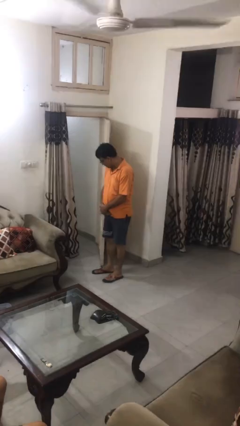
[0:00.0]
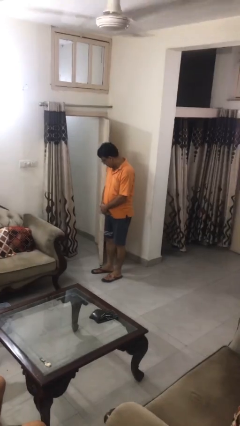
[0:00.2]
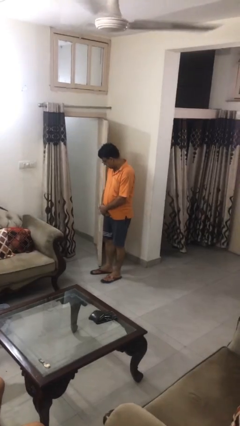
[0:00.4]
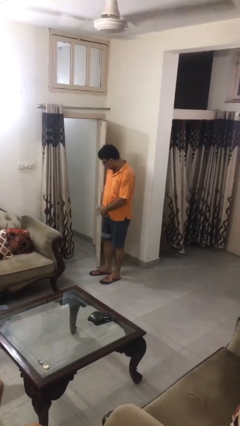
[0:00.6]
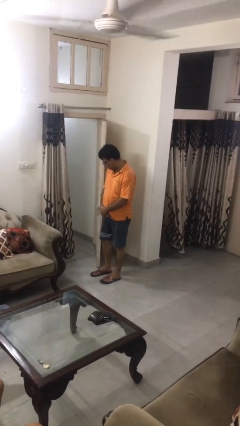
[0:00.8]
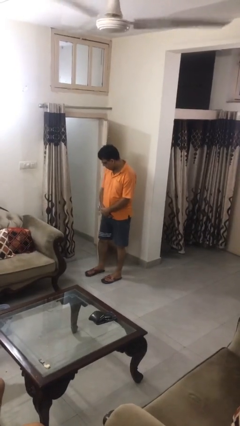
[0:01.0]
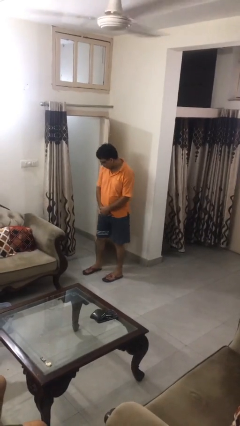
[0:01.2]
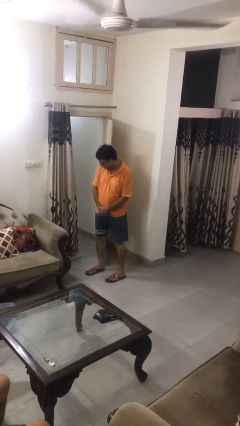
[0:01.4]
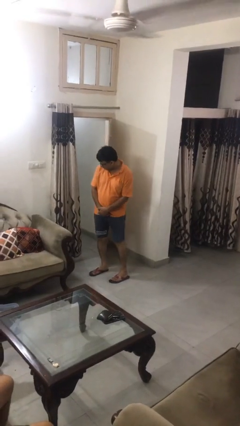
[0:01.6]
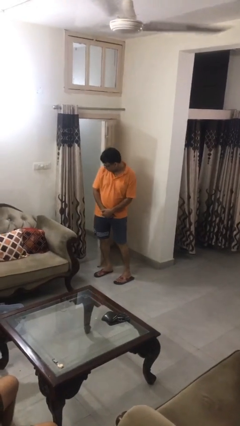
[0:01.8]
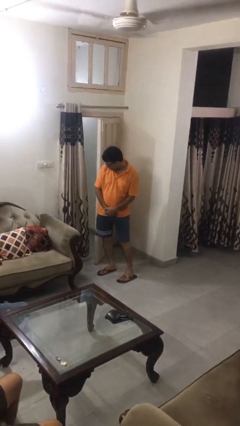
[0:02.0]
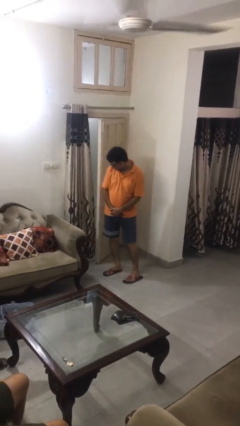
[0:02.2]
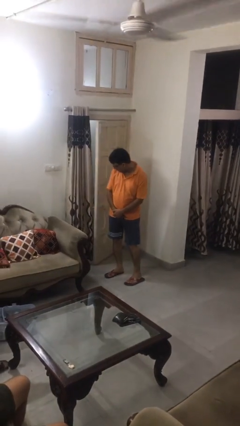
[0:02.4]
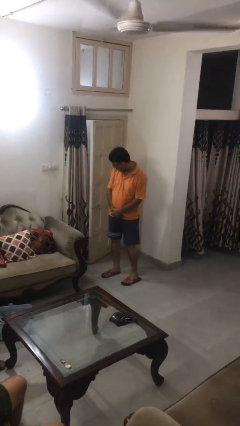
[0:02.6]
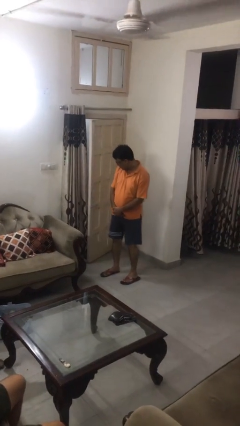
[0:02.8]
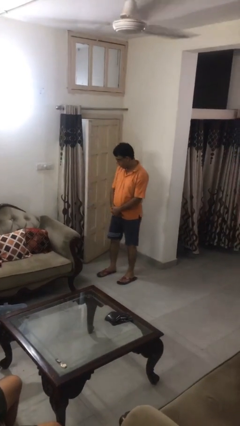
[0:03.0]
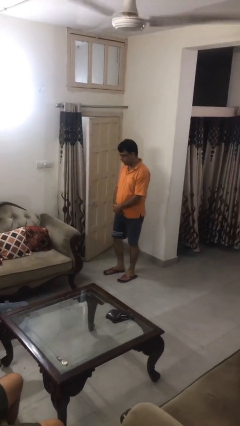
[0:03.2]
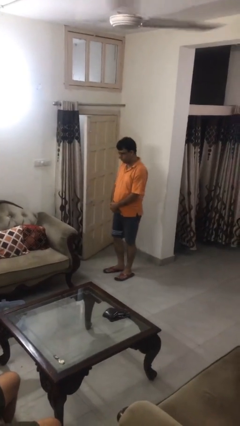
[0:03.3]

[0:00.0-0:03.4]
person closes door with hip

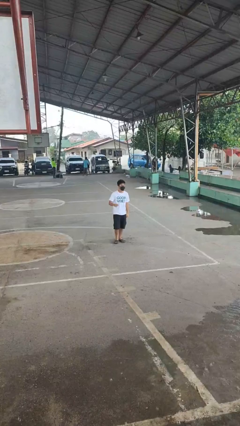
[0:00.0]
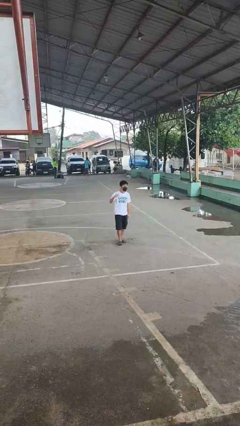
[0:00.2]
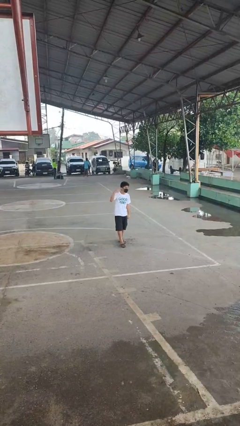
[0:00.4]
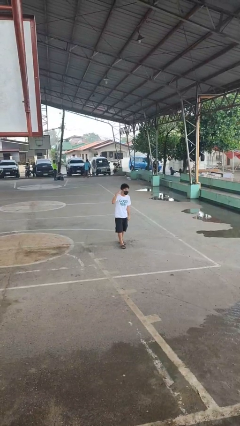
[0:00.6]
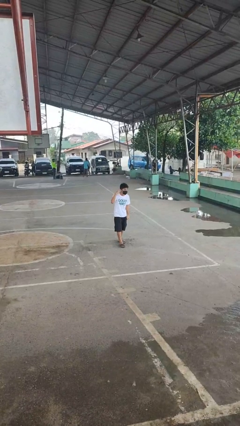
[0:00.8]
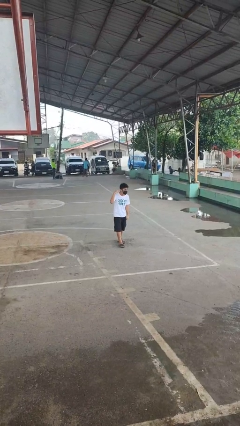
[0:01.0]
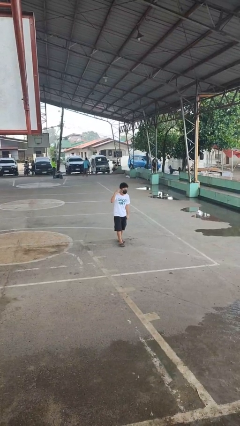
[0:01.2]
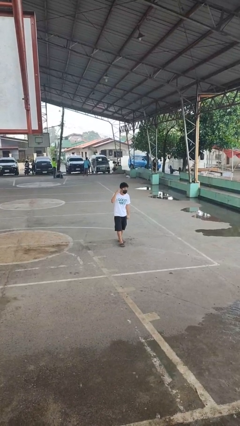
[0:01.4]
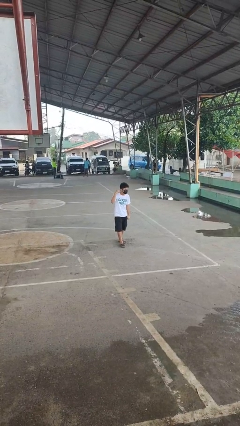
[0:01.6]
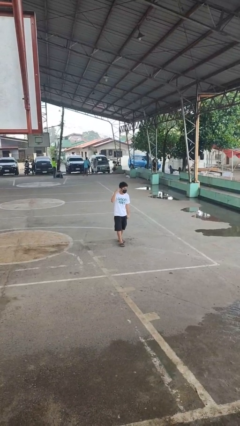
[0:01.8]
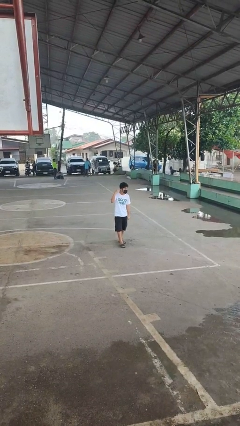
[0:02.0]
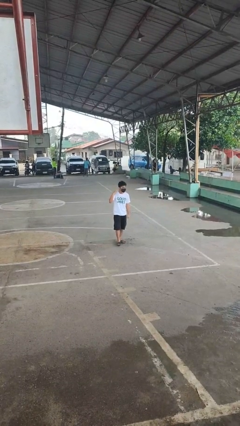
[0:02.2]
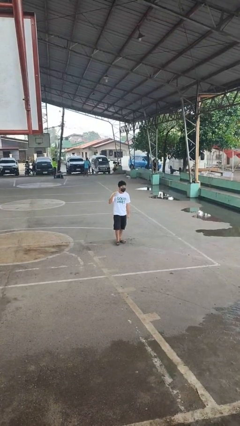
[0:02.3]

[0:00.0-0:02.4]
person gestures listen closely

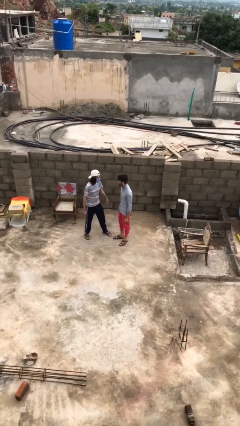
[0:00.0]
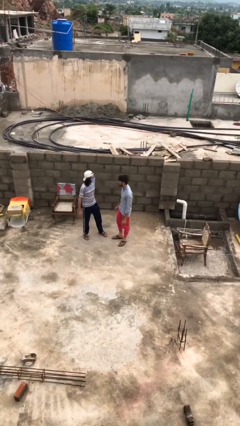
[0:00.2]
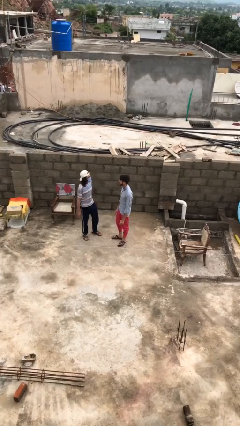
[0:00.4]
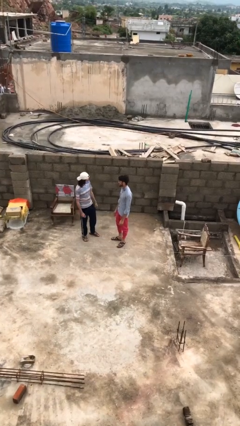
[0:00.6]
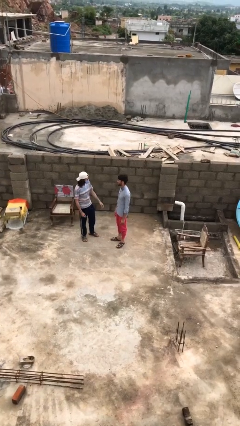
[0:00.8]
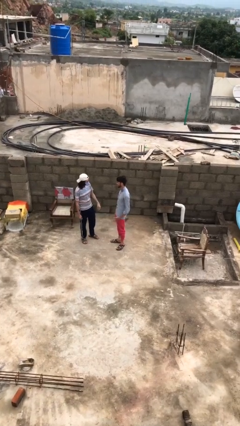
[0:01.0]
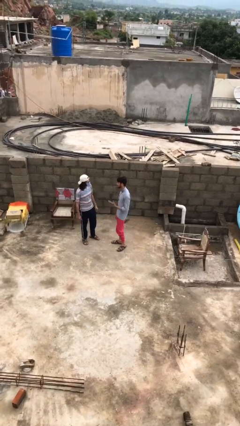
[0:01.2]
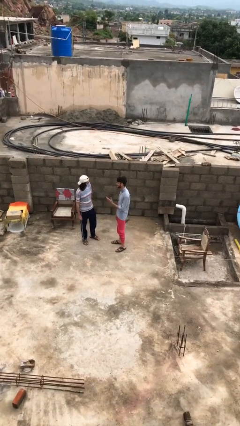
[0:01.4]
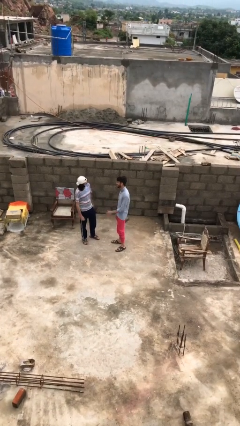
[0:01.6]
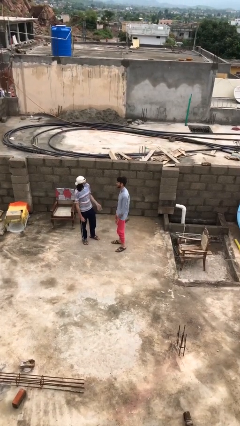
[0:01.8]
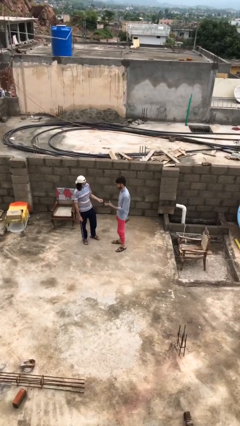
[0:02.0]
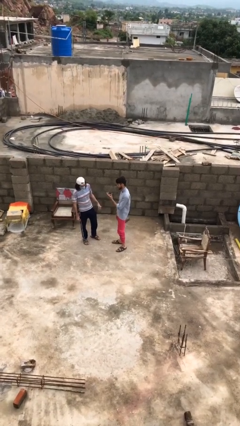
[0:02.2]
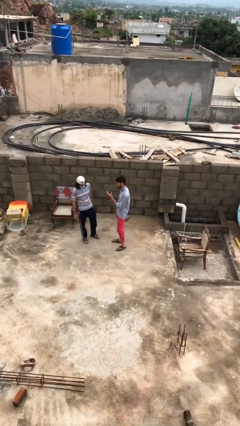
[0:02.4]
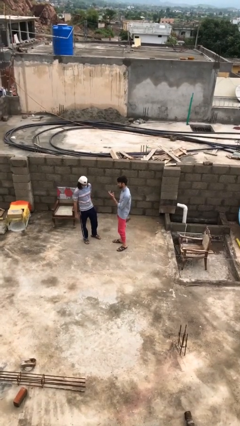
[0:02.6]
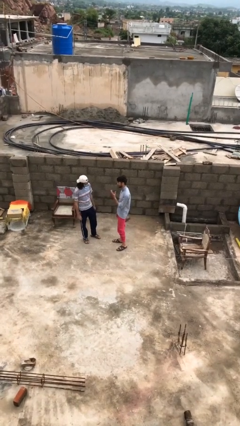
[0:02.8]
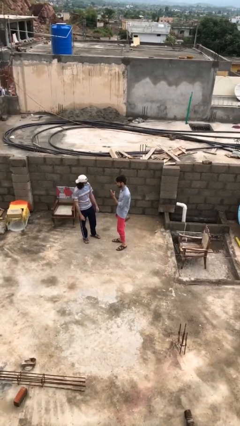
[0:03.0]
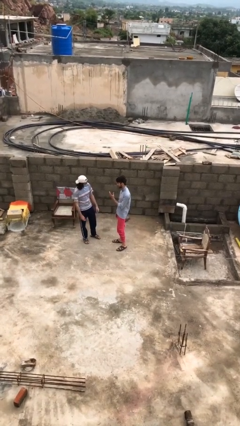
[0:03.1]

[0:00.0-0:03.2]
person talks to person

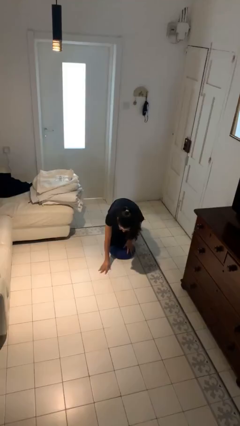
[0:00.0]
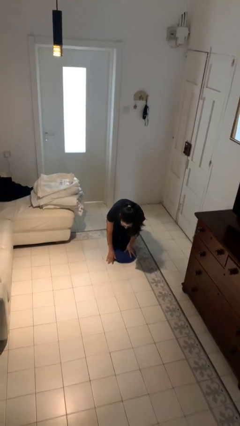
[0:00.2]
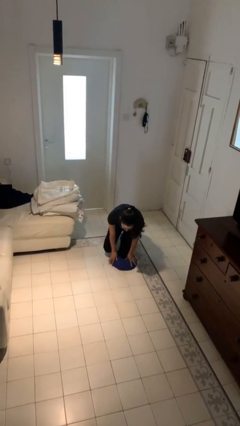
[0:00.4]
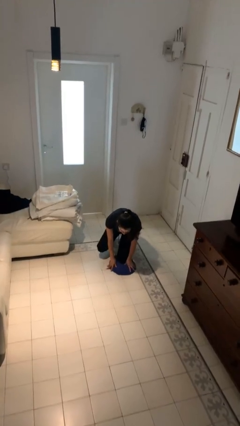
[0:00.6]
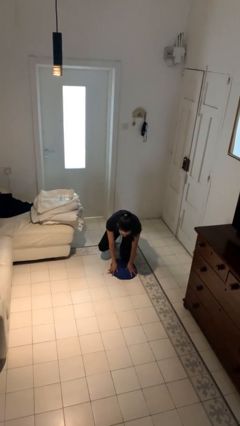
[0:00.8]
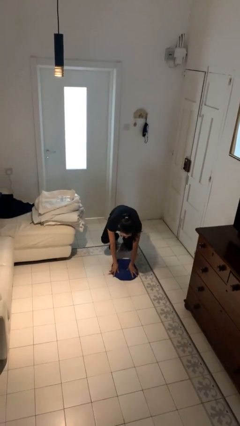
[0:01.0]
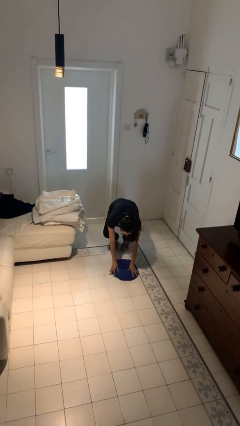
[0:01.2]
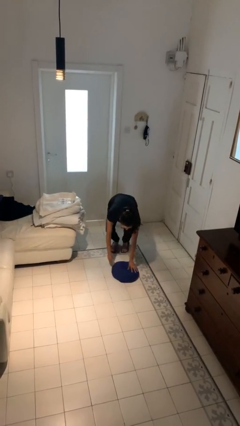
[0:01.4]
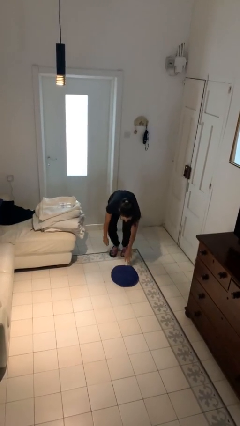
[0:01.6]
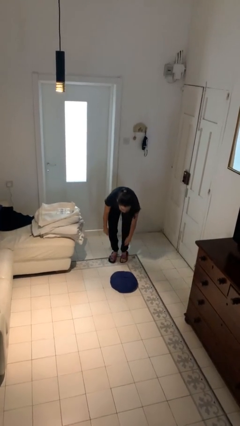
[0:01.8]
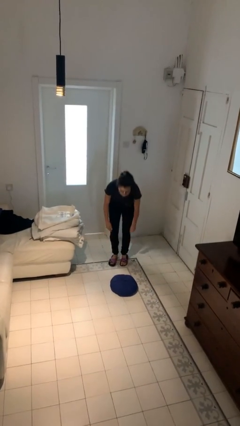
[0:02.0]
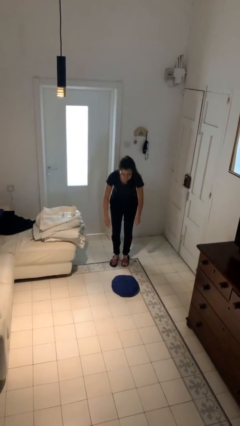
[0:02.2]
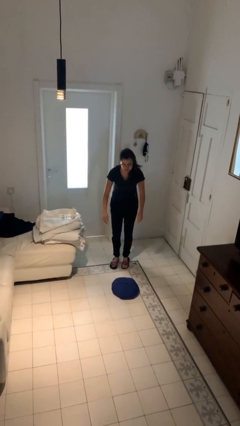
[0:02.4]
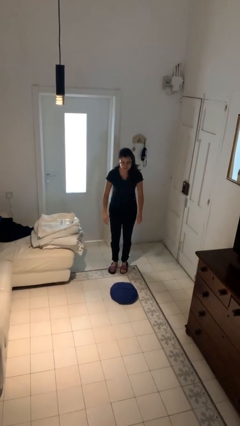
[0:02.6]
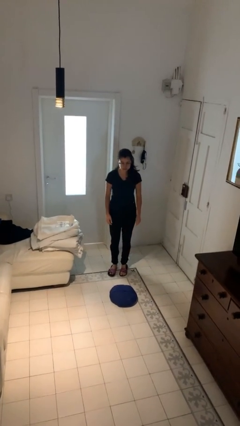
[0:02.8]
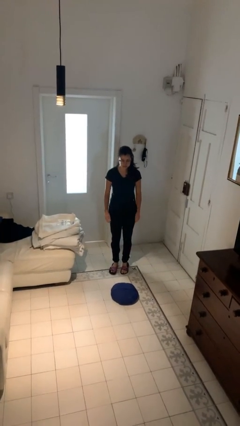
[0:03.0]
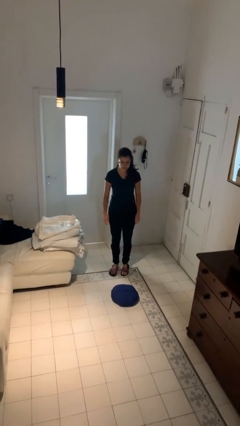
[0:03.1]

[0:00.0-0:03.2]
person stands up from floor

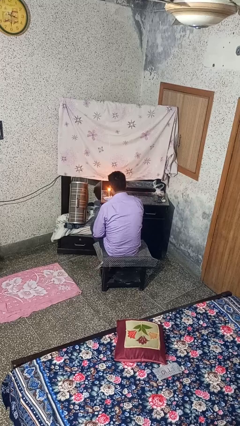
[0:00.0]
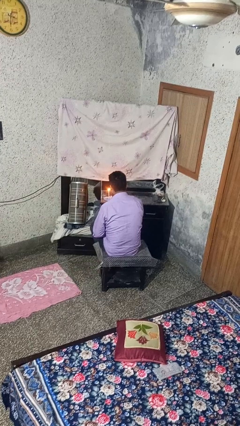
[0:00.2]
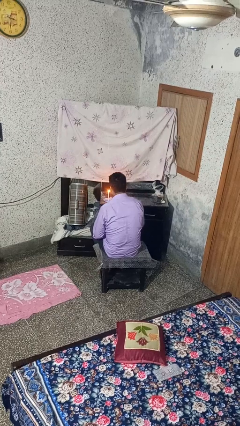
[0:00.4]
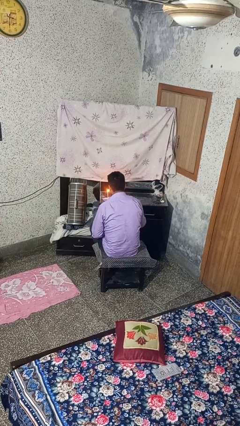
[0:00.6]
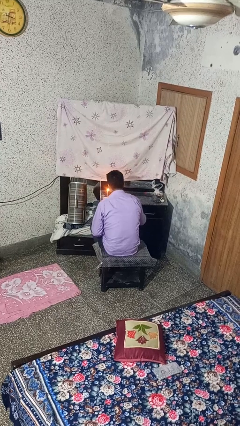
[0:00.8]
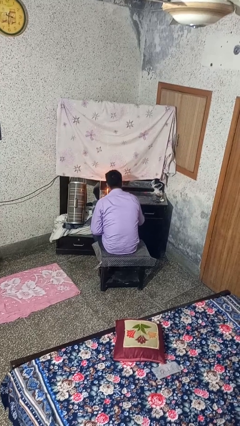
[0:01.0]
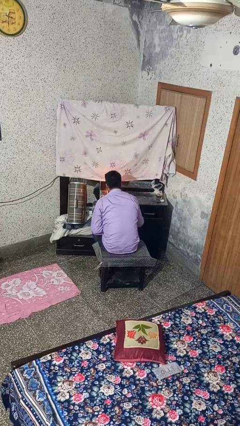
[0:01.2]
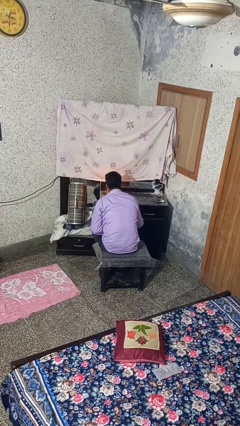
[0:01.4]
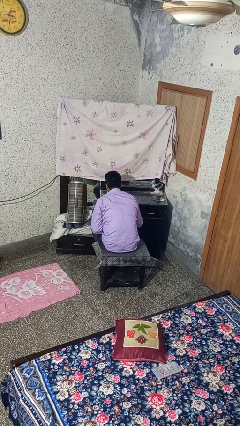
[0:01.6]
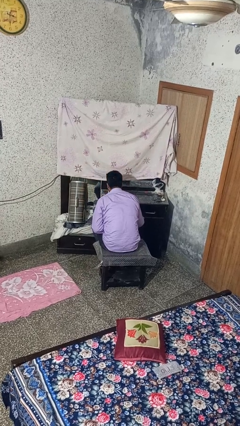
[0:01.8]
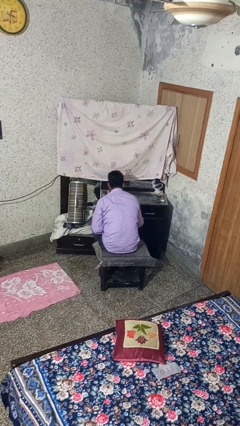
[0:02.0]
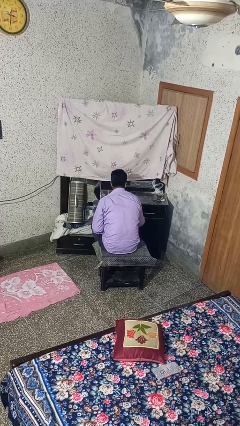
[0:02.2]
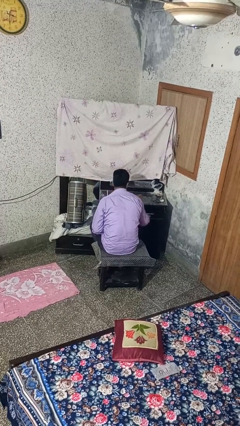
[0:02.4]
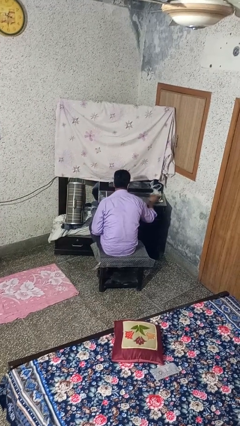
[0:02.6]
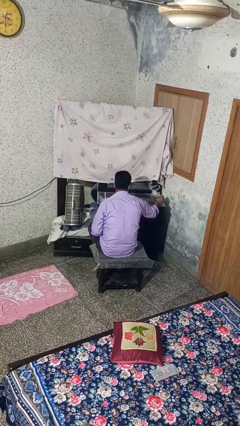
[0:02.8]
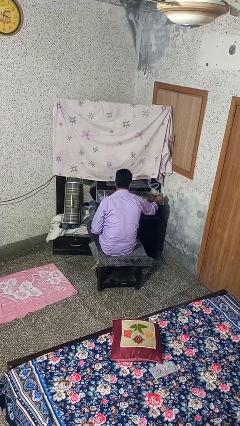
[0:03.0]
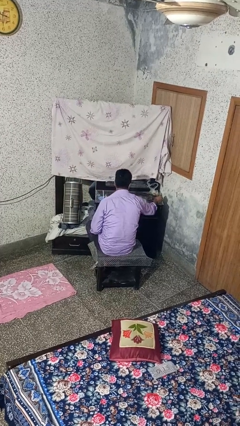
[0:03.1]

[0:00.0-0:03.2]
person extinguishes candle

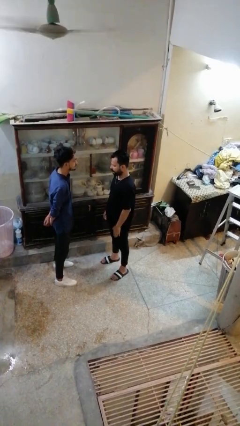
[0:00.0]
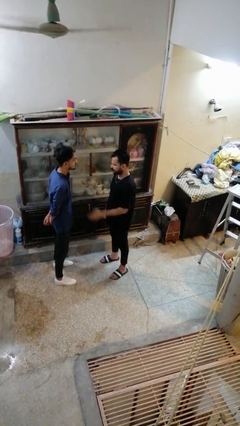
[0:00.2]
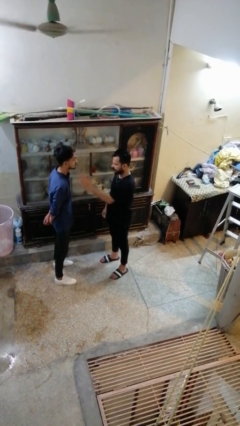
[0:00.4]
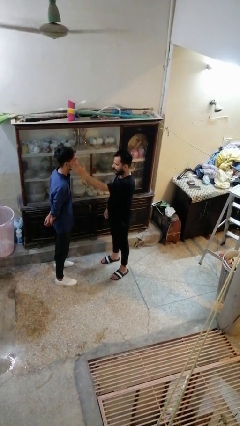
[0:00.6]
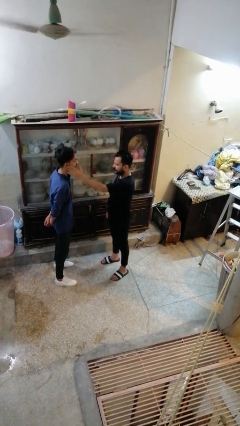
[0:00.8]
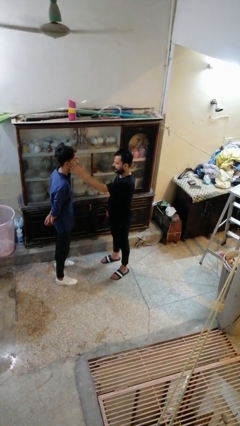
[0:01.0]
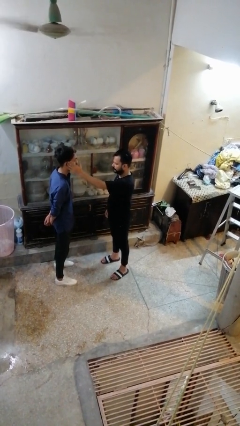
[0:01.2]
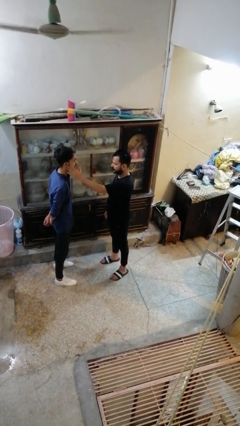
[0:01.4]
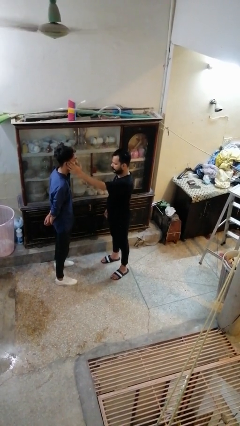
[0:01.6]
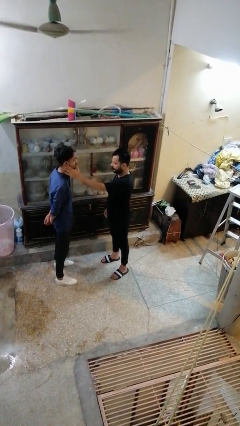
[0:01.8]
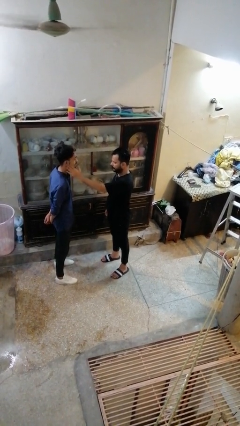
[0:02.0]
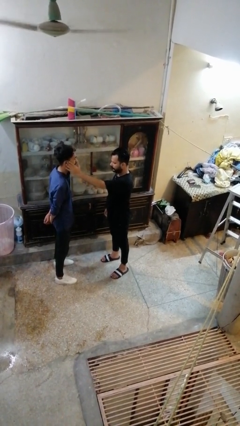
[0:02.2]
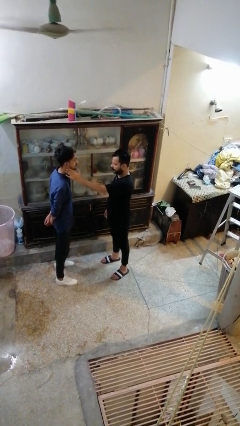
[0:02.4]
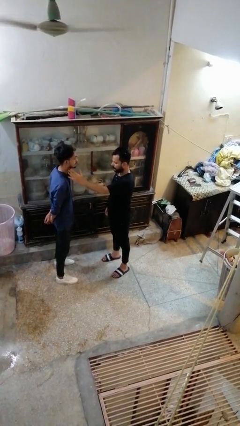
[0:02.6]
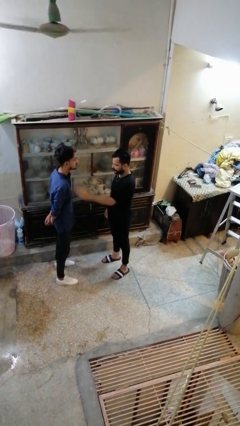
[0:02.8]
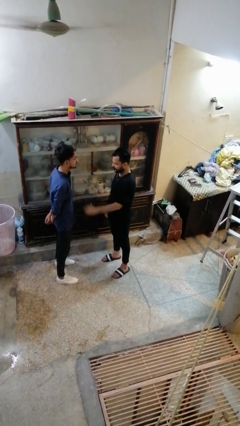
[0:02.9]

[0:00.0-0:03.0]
person touches face of person
